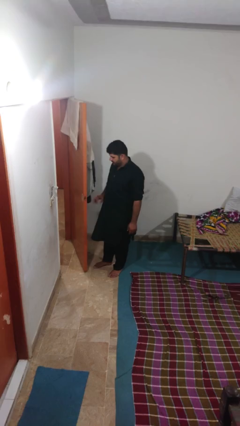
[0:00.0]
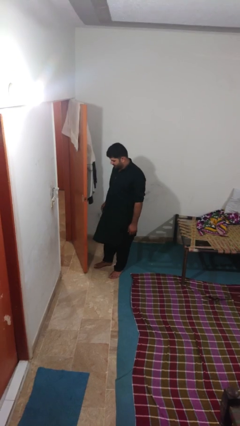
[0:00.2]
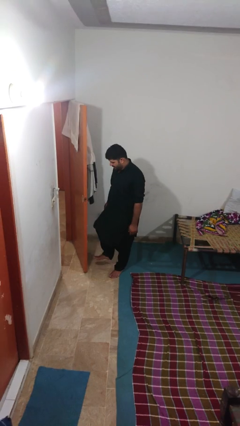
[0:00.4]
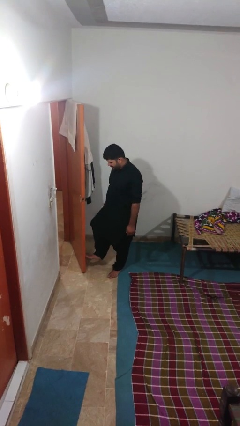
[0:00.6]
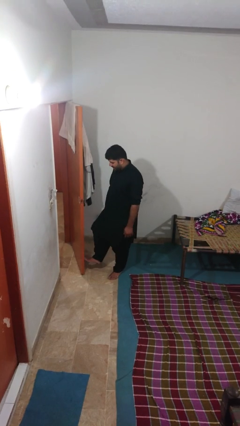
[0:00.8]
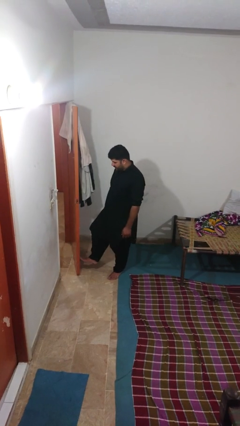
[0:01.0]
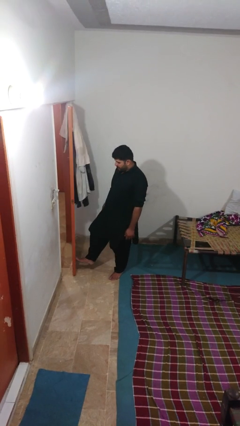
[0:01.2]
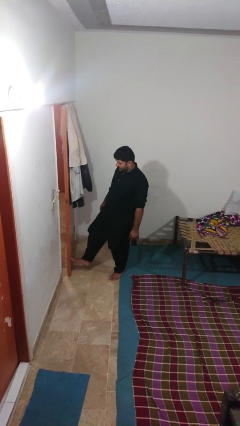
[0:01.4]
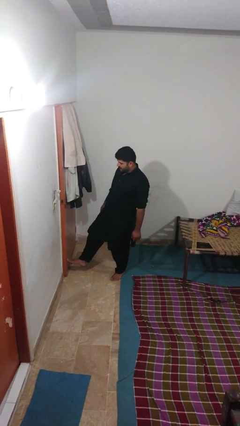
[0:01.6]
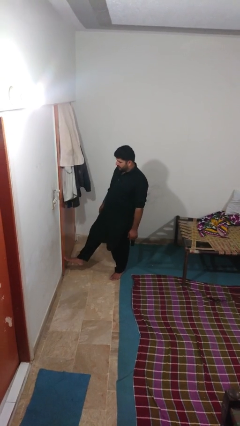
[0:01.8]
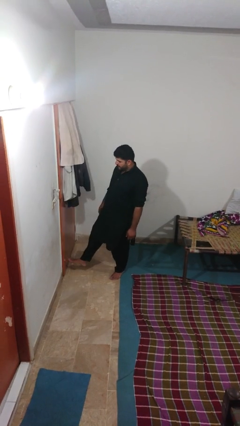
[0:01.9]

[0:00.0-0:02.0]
person closes door with foot

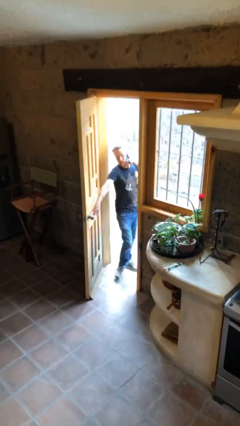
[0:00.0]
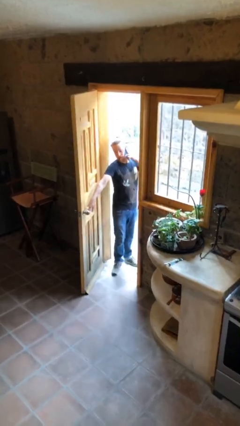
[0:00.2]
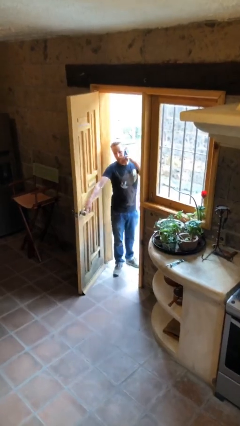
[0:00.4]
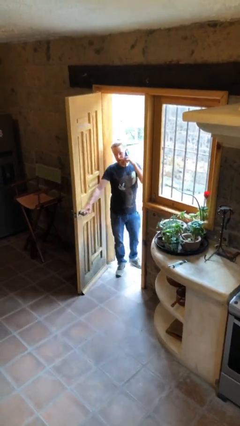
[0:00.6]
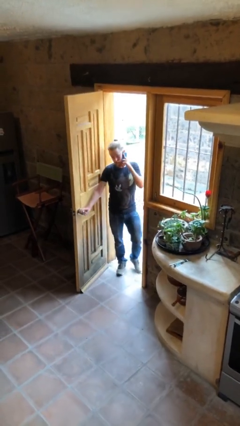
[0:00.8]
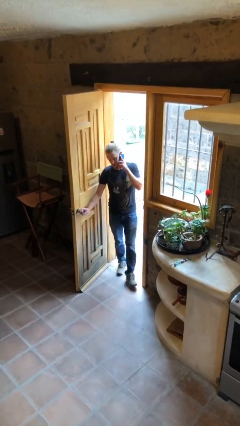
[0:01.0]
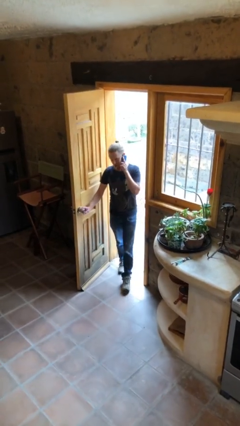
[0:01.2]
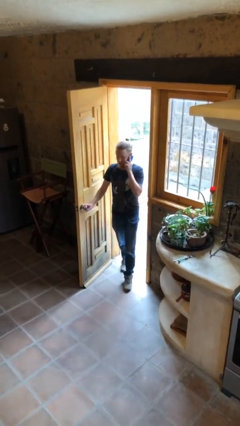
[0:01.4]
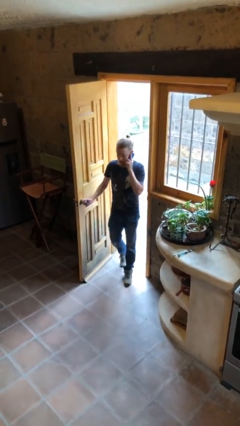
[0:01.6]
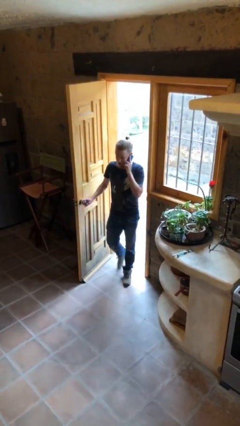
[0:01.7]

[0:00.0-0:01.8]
person enters scene through structure

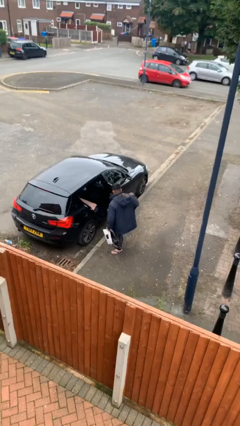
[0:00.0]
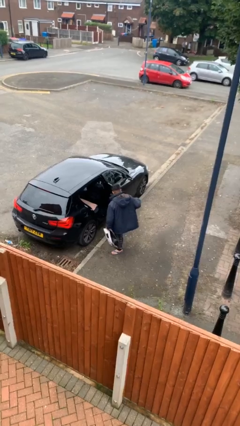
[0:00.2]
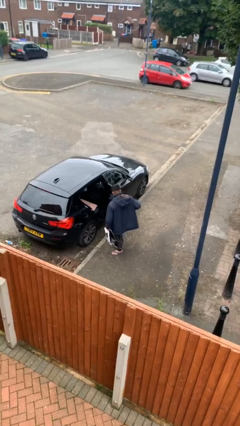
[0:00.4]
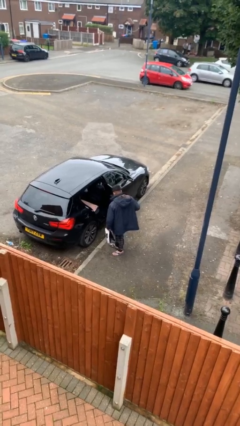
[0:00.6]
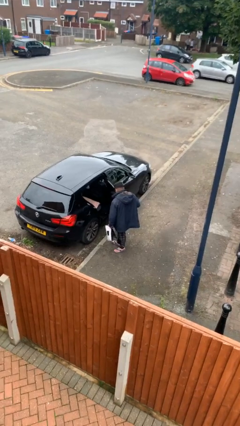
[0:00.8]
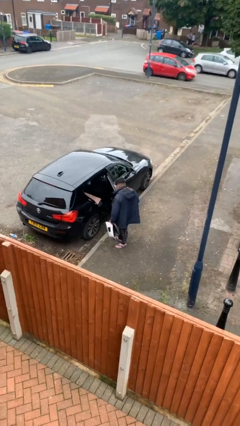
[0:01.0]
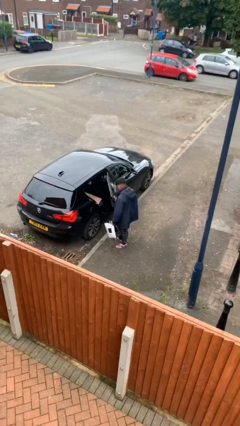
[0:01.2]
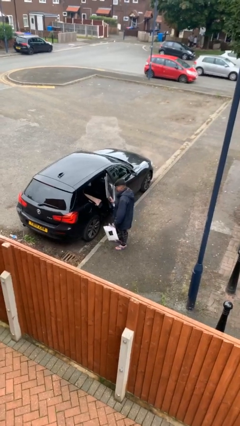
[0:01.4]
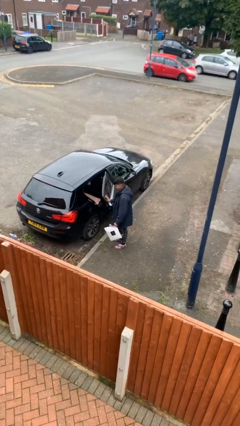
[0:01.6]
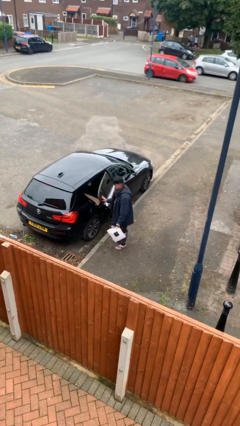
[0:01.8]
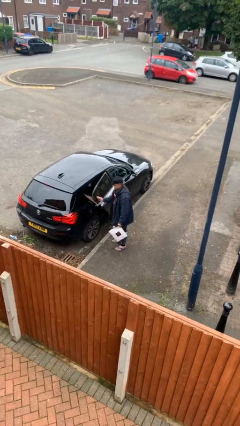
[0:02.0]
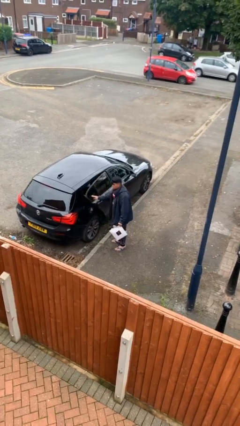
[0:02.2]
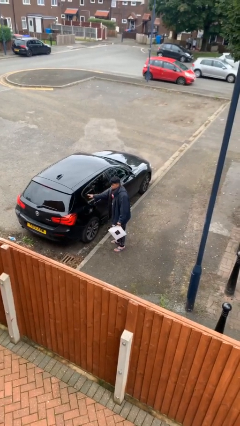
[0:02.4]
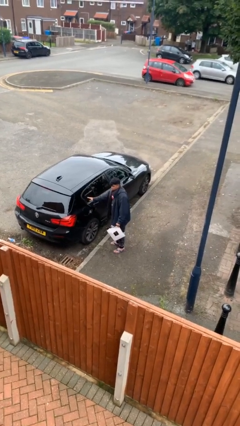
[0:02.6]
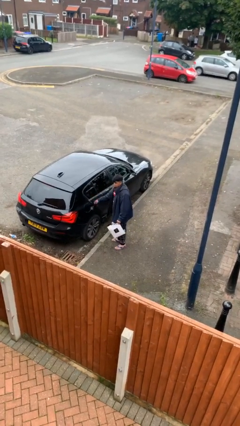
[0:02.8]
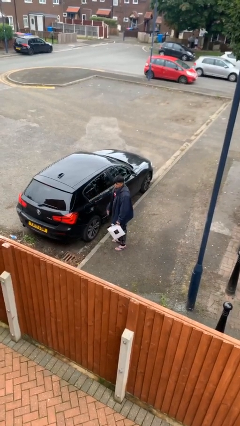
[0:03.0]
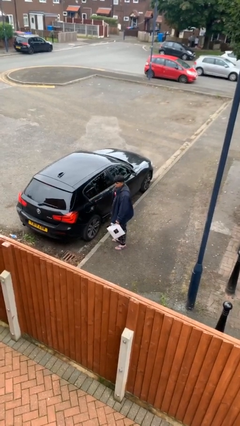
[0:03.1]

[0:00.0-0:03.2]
person closes car door

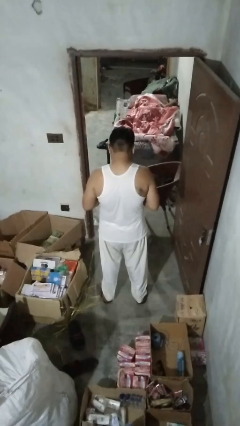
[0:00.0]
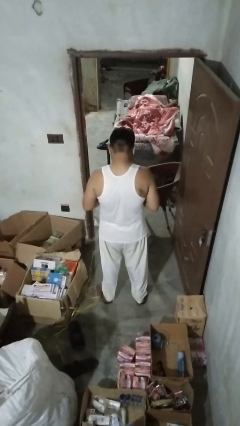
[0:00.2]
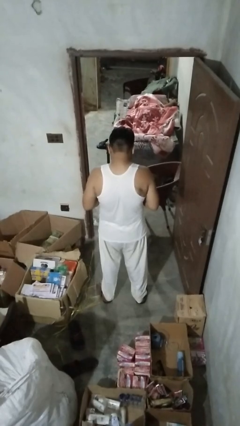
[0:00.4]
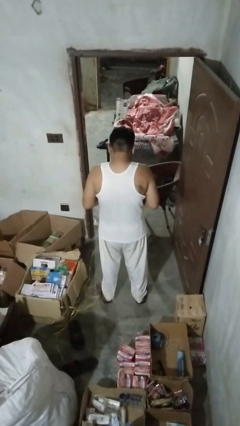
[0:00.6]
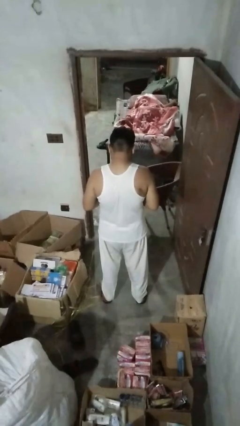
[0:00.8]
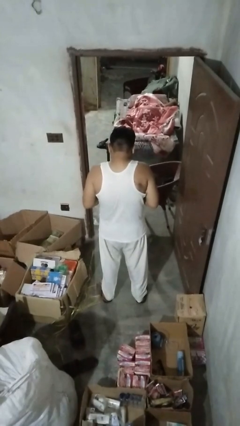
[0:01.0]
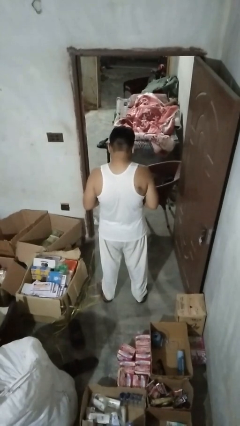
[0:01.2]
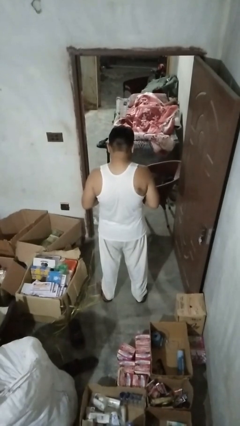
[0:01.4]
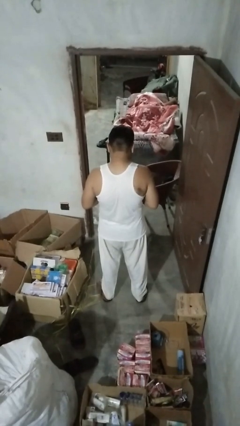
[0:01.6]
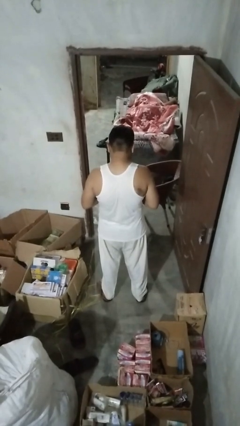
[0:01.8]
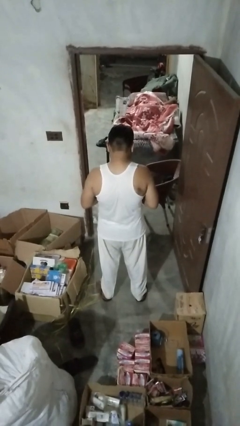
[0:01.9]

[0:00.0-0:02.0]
person shrugs

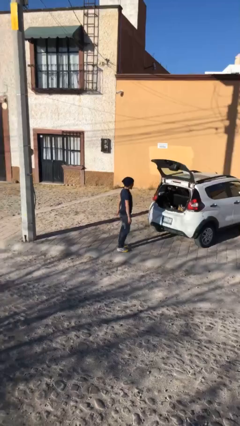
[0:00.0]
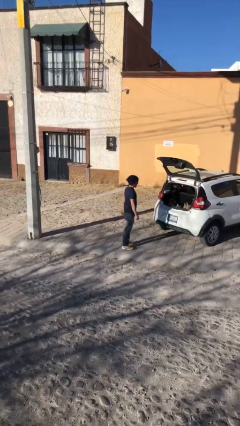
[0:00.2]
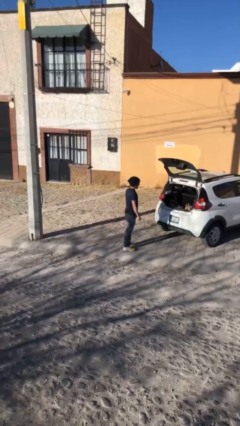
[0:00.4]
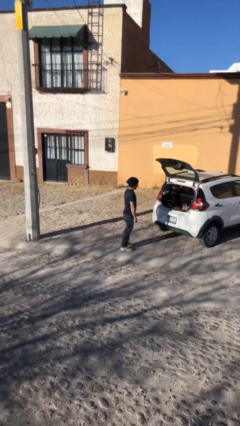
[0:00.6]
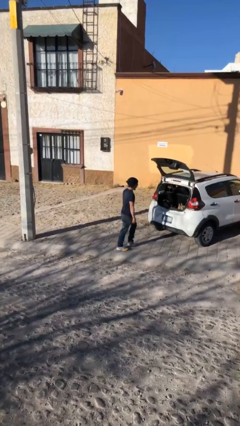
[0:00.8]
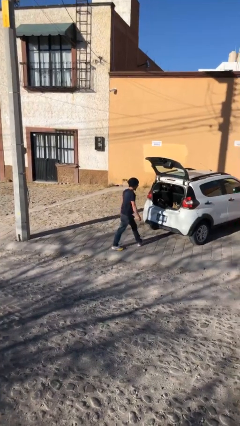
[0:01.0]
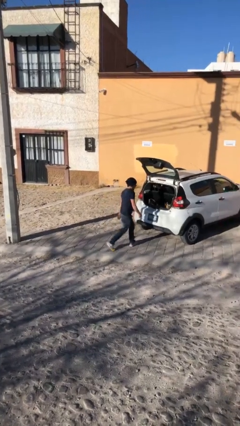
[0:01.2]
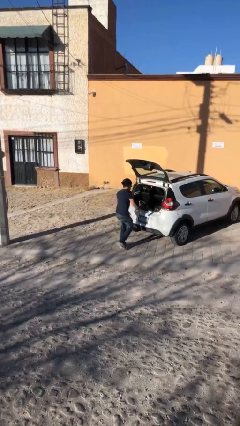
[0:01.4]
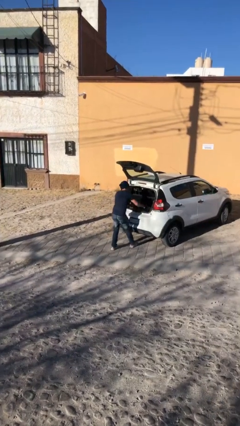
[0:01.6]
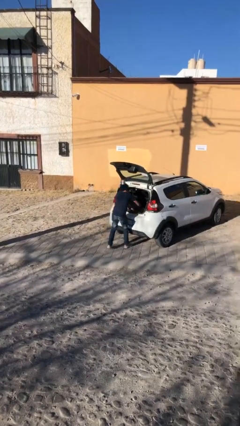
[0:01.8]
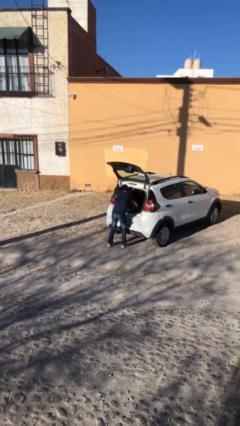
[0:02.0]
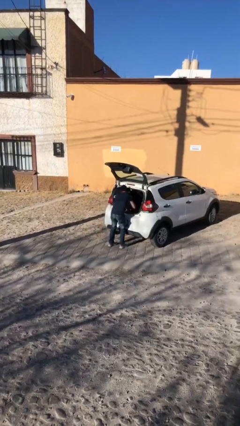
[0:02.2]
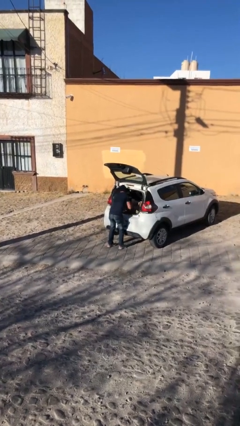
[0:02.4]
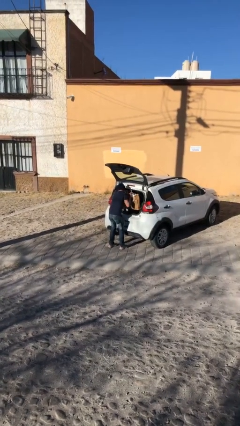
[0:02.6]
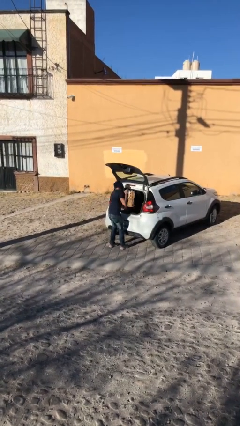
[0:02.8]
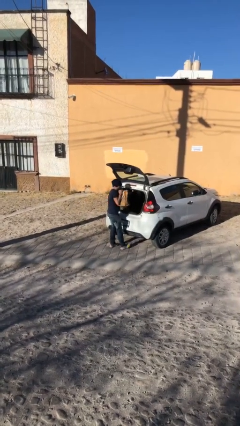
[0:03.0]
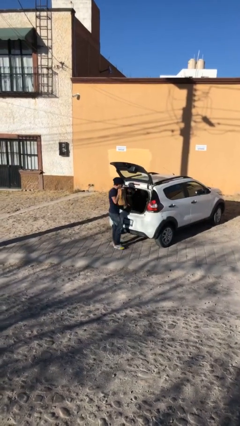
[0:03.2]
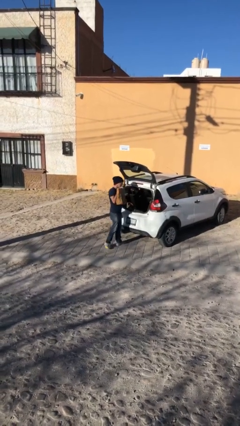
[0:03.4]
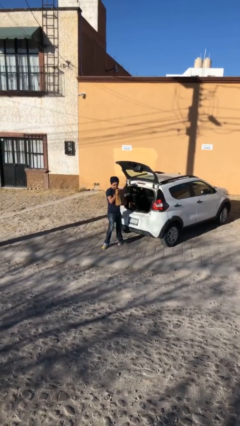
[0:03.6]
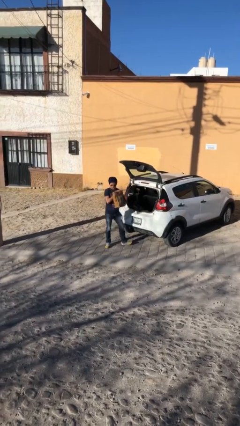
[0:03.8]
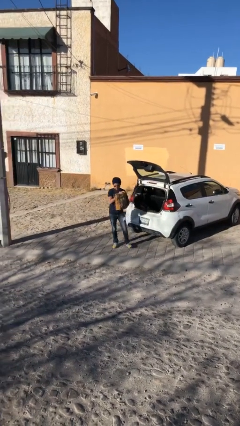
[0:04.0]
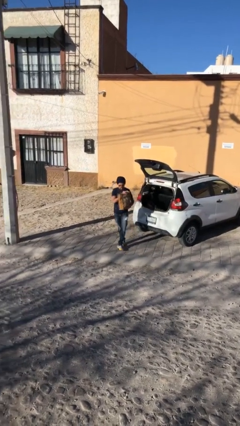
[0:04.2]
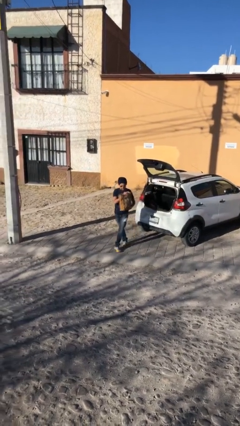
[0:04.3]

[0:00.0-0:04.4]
person unloads car

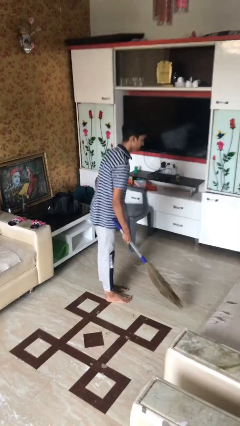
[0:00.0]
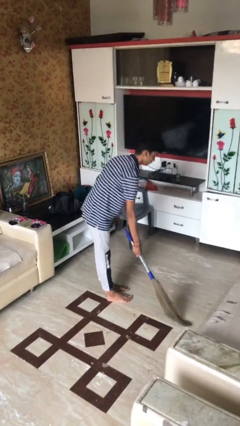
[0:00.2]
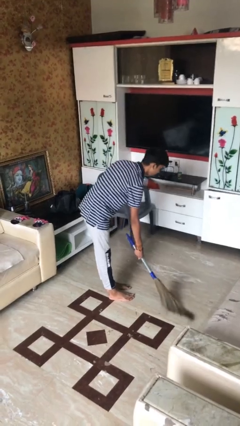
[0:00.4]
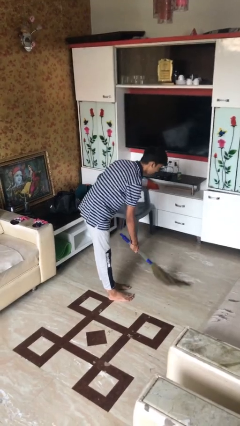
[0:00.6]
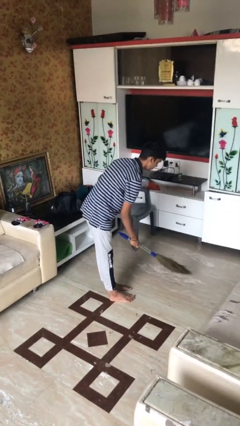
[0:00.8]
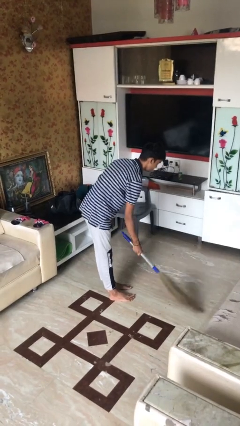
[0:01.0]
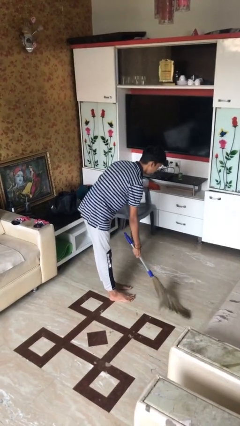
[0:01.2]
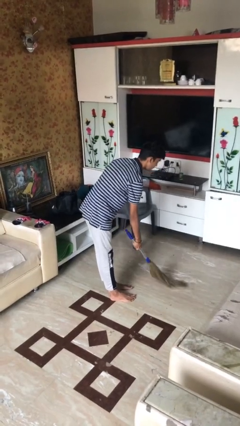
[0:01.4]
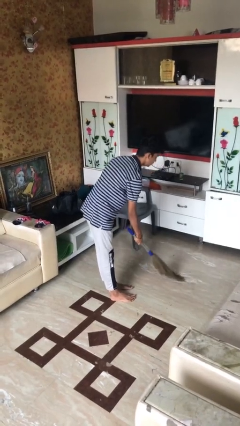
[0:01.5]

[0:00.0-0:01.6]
person sweeps floor

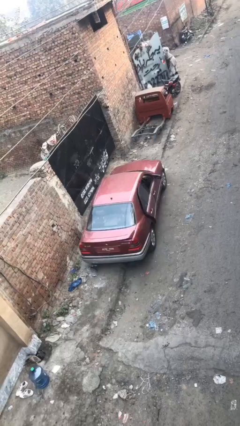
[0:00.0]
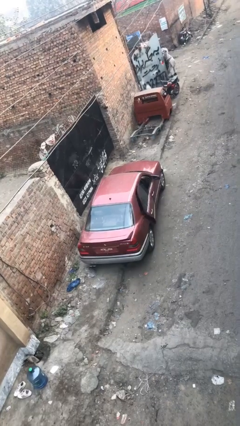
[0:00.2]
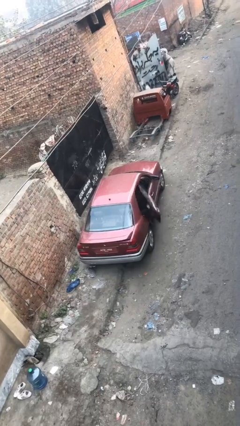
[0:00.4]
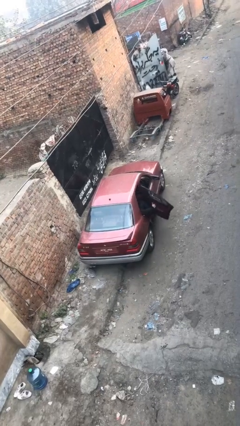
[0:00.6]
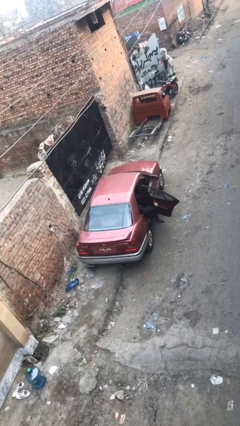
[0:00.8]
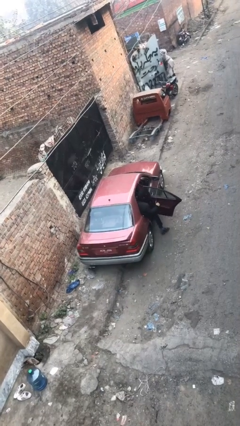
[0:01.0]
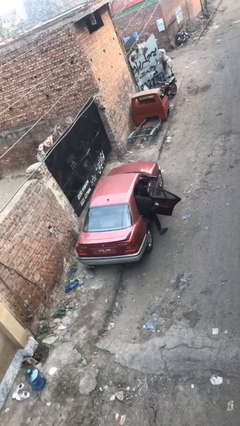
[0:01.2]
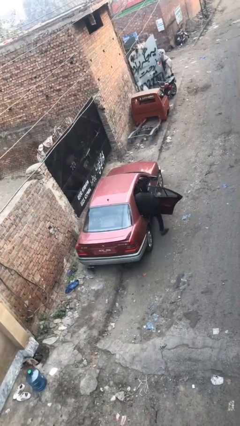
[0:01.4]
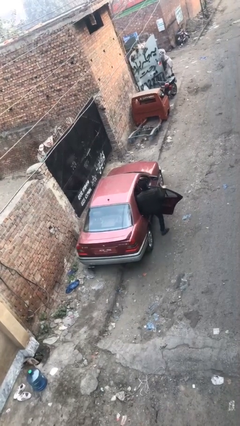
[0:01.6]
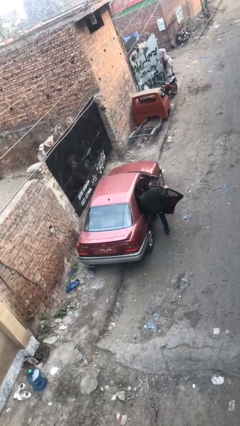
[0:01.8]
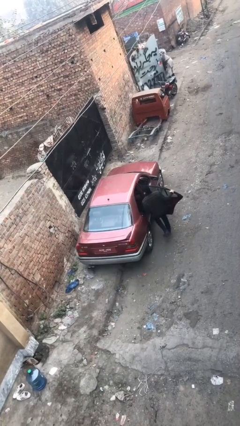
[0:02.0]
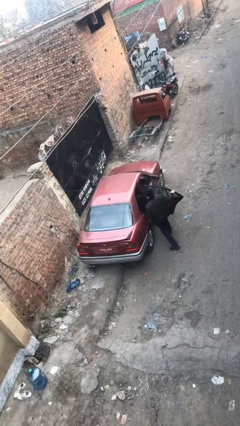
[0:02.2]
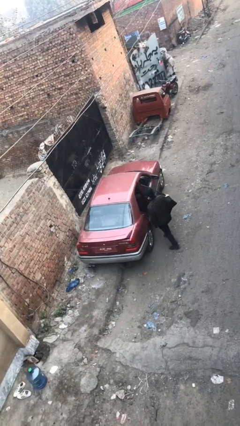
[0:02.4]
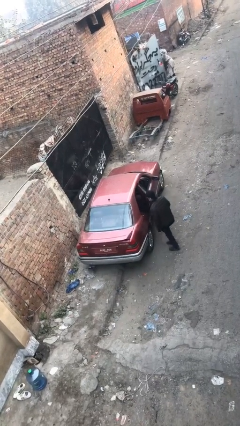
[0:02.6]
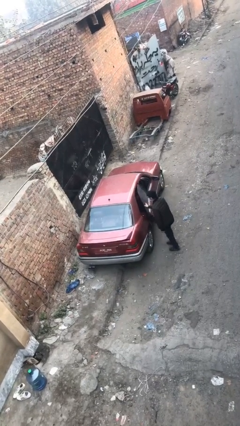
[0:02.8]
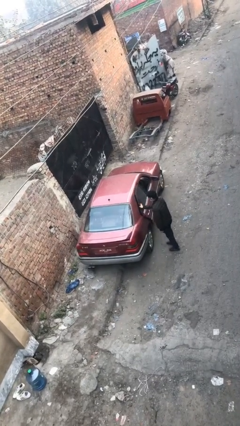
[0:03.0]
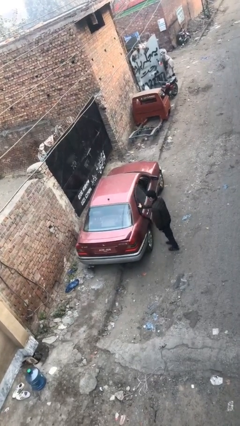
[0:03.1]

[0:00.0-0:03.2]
car drops off person
